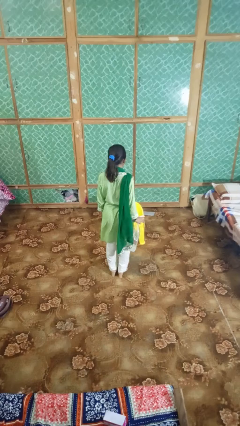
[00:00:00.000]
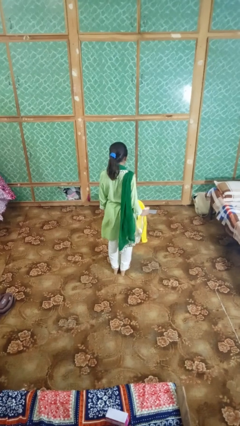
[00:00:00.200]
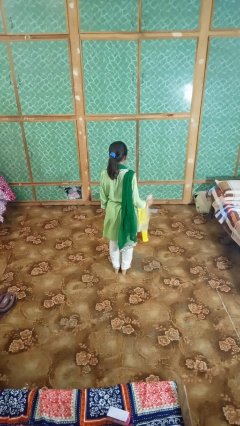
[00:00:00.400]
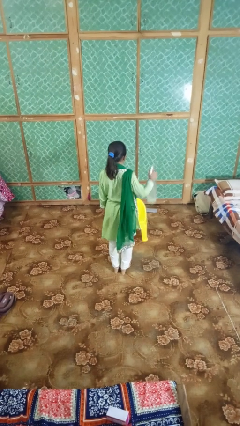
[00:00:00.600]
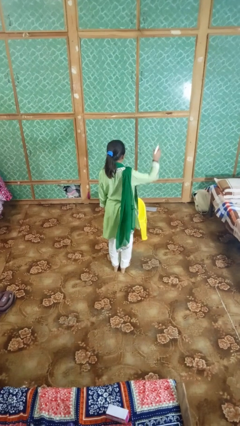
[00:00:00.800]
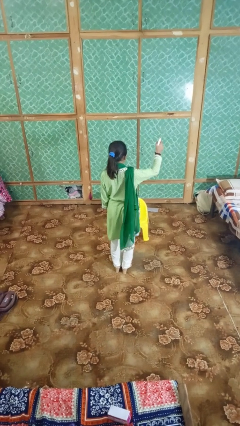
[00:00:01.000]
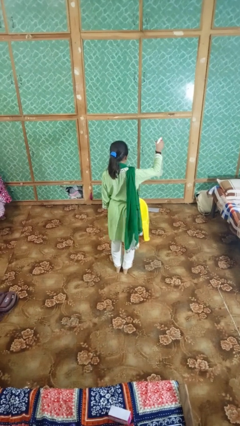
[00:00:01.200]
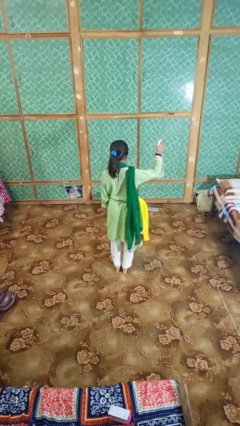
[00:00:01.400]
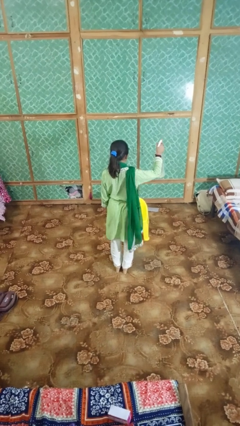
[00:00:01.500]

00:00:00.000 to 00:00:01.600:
person sprays from bottle

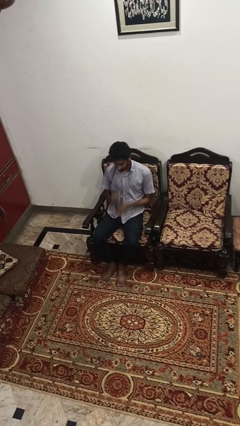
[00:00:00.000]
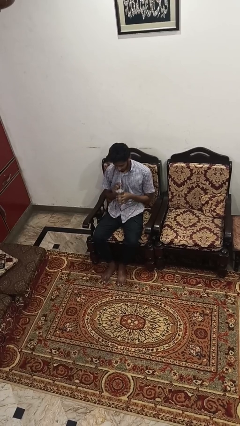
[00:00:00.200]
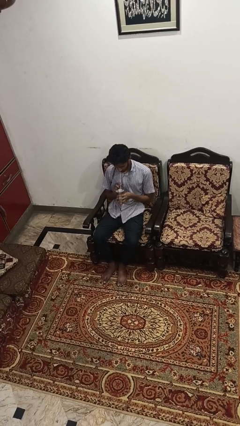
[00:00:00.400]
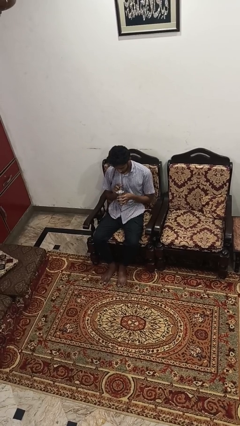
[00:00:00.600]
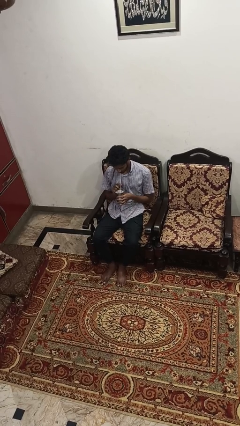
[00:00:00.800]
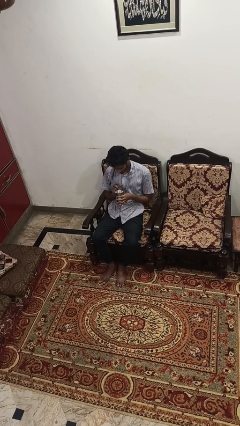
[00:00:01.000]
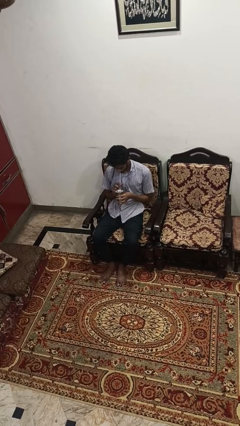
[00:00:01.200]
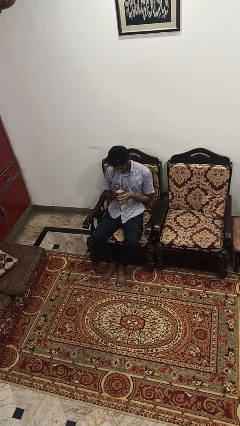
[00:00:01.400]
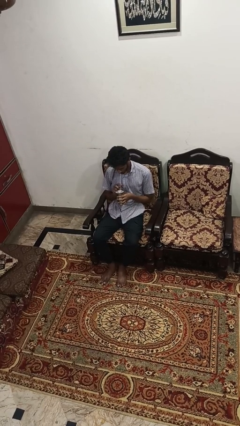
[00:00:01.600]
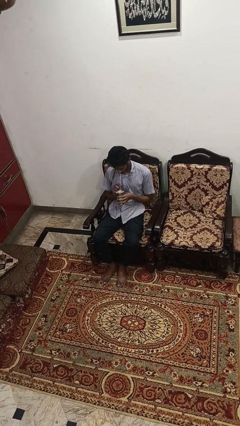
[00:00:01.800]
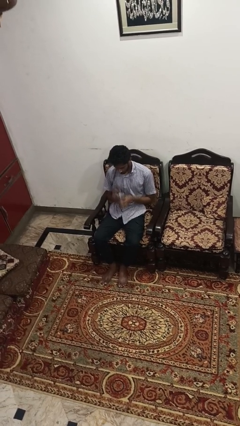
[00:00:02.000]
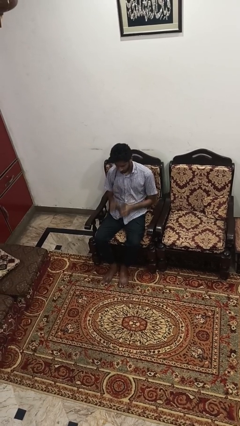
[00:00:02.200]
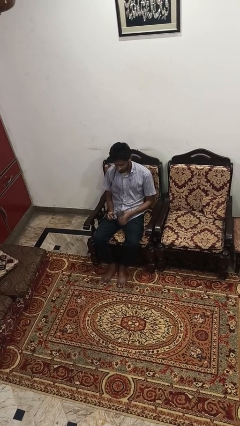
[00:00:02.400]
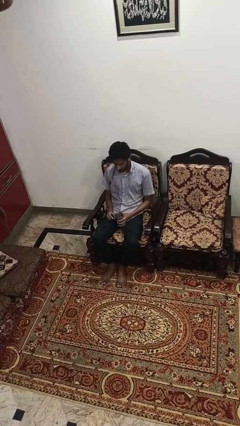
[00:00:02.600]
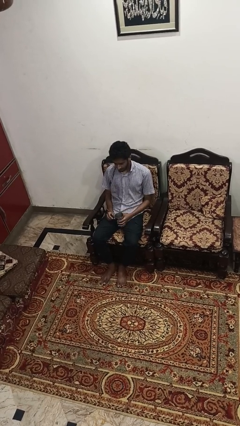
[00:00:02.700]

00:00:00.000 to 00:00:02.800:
person drinks from straw

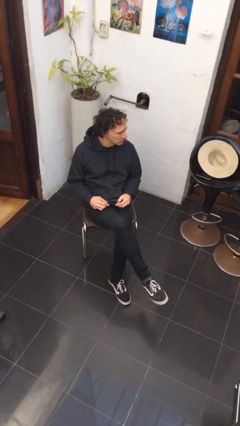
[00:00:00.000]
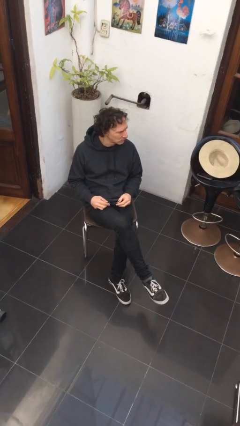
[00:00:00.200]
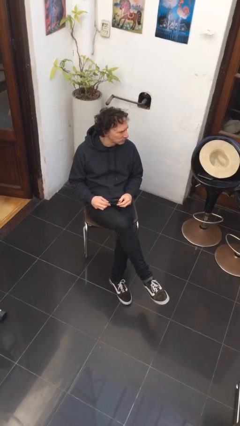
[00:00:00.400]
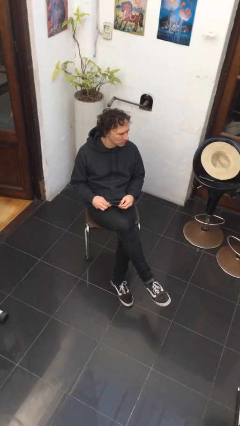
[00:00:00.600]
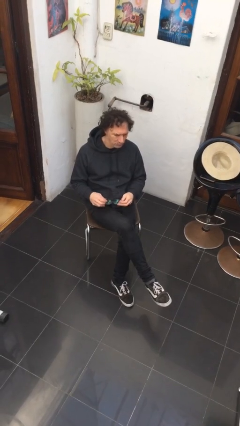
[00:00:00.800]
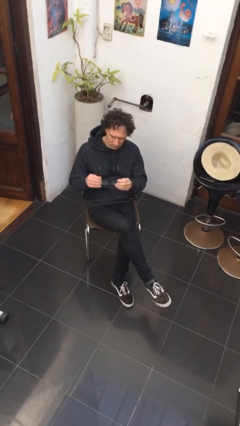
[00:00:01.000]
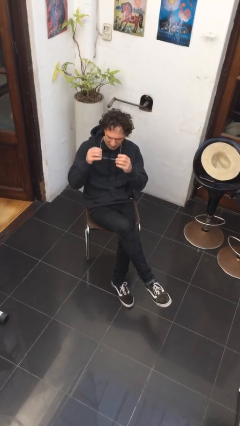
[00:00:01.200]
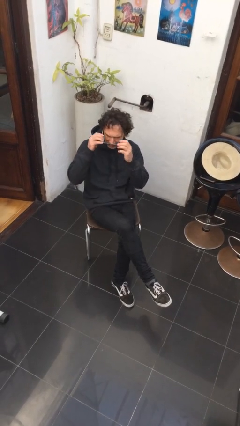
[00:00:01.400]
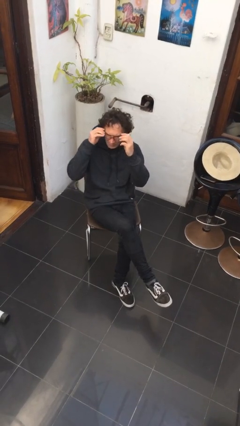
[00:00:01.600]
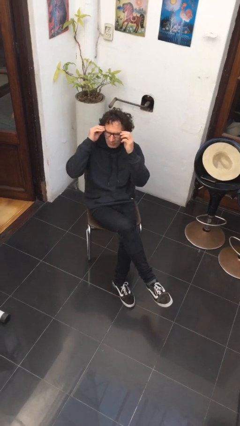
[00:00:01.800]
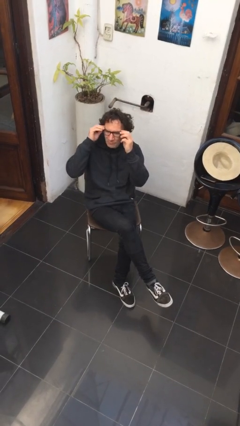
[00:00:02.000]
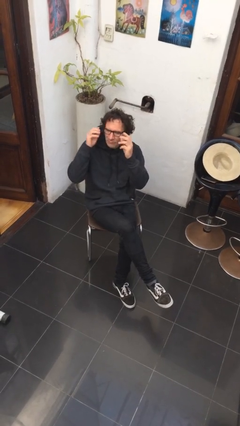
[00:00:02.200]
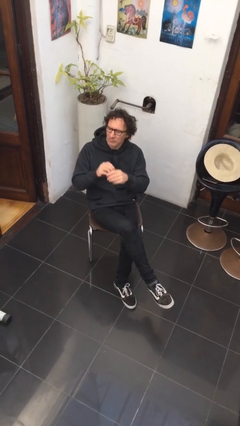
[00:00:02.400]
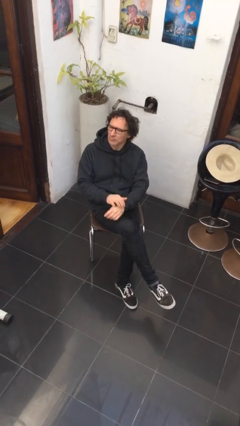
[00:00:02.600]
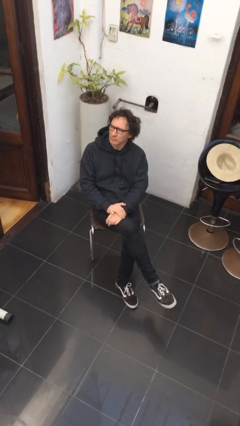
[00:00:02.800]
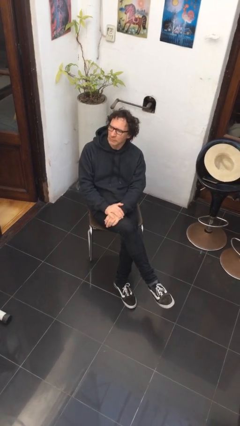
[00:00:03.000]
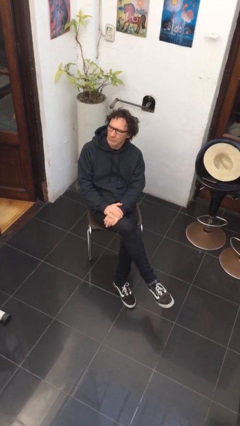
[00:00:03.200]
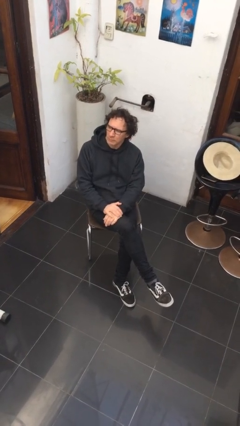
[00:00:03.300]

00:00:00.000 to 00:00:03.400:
person puts on glasses

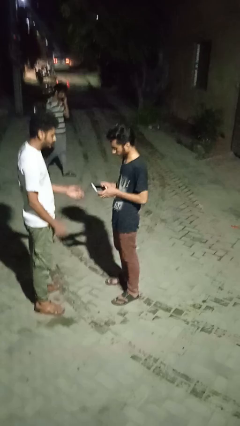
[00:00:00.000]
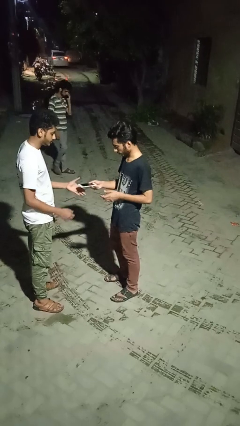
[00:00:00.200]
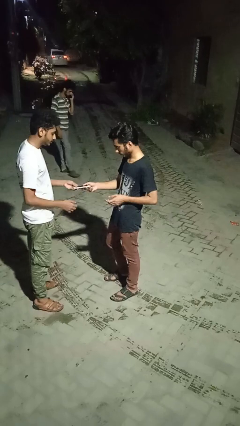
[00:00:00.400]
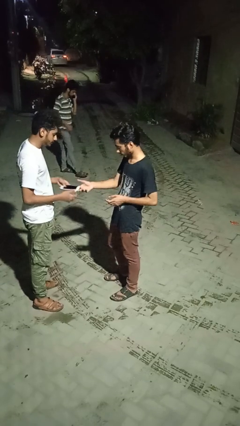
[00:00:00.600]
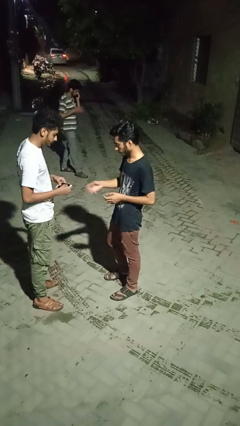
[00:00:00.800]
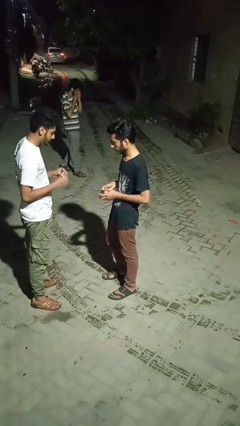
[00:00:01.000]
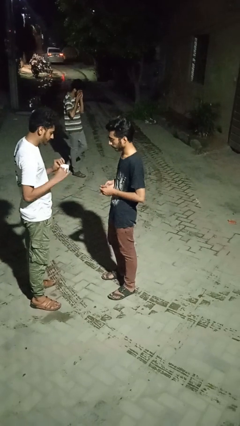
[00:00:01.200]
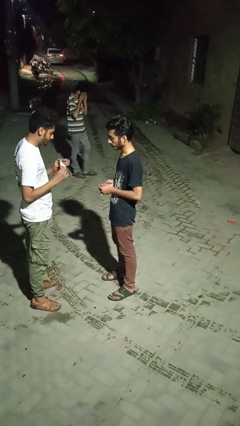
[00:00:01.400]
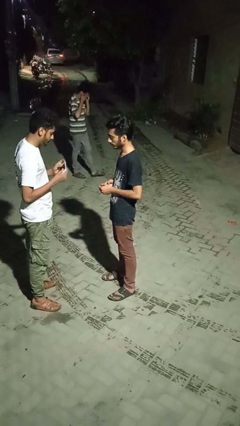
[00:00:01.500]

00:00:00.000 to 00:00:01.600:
person transfers object to person

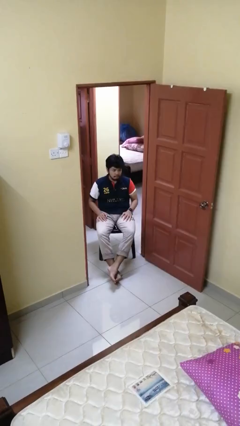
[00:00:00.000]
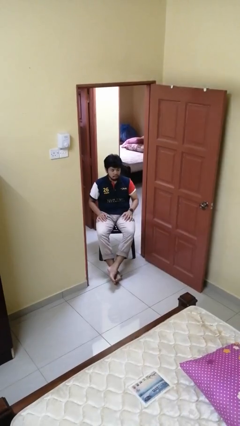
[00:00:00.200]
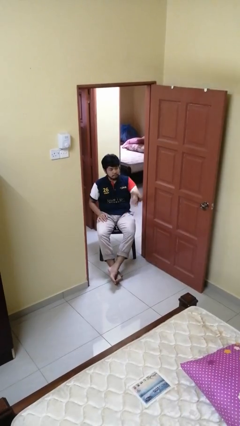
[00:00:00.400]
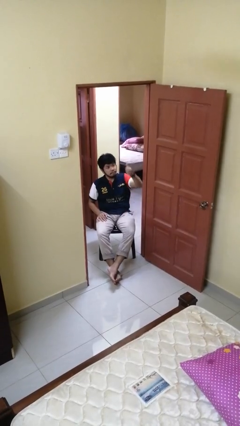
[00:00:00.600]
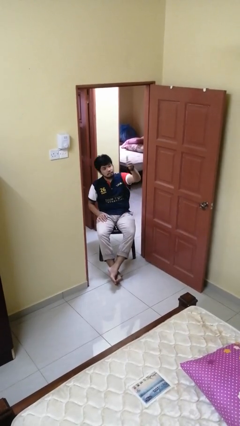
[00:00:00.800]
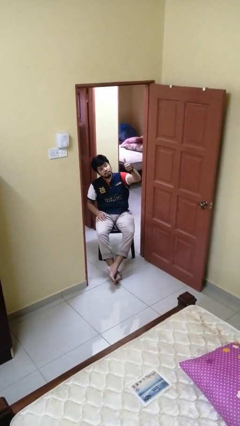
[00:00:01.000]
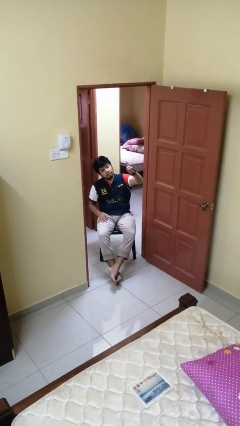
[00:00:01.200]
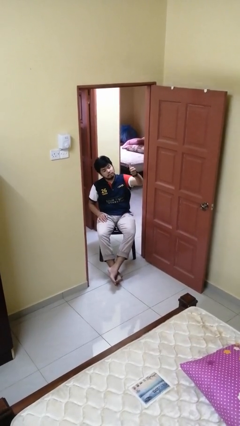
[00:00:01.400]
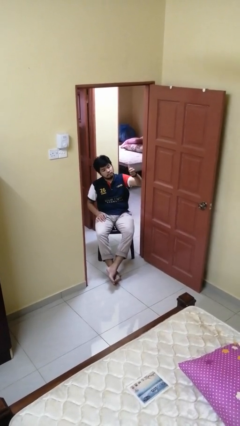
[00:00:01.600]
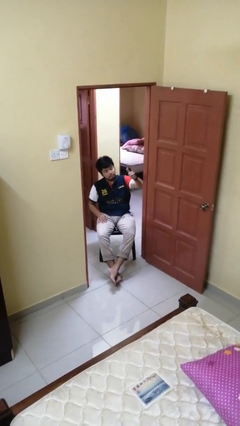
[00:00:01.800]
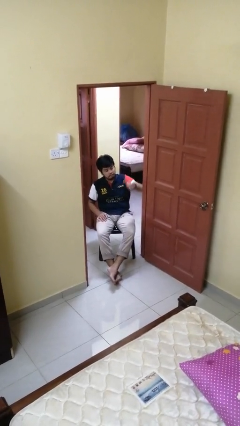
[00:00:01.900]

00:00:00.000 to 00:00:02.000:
person gestures thumbs up

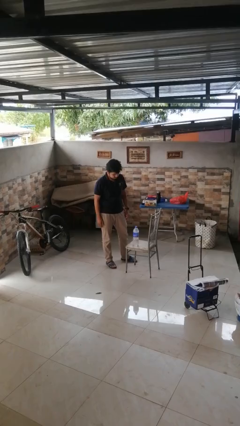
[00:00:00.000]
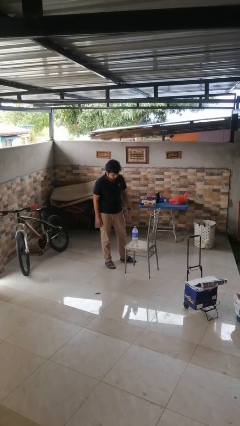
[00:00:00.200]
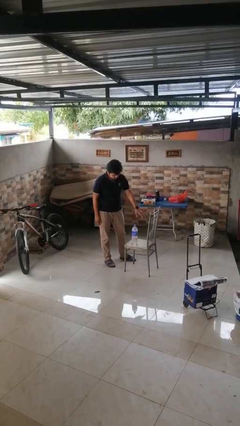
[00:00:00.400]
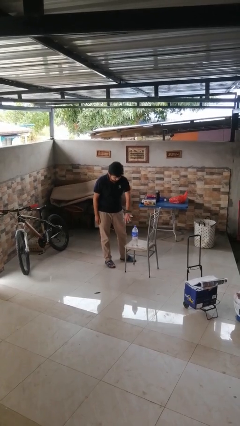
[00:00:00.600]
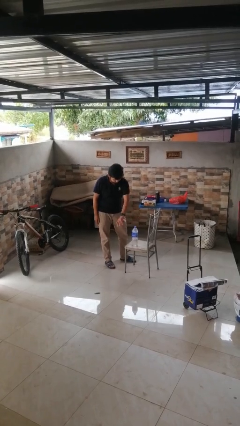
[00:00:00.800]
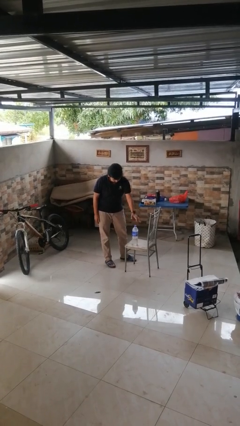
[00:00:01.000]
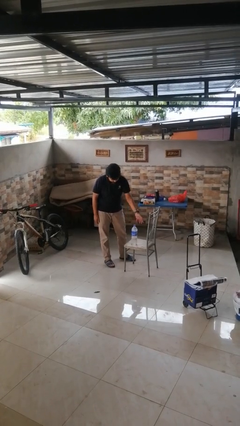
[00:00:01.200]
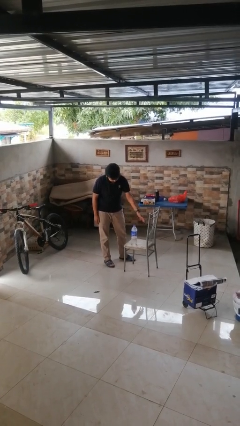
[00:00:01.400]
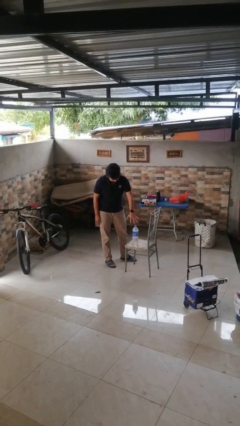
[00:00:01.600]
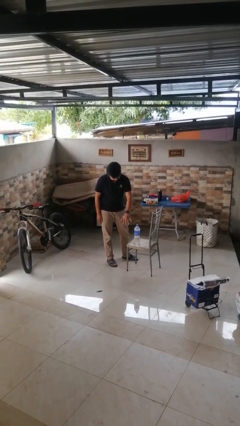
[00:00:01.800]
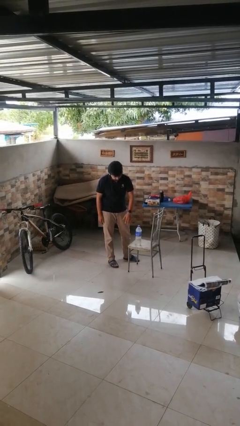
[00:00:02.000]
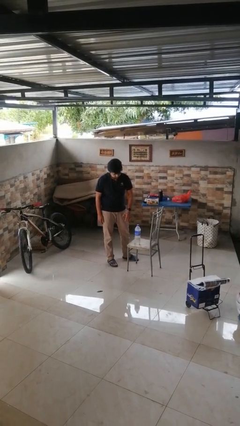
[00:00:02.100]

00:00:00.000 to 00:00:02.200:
person waves hand over object

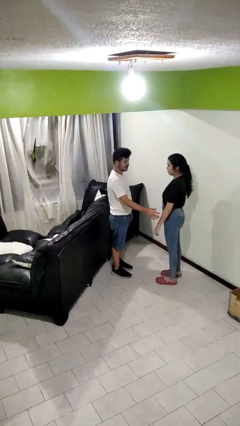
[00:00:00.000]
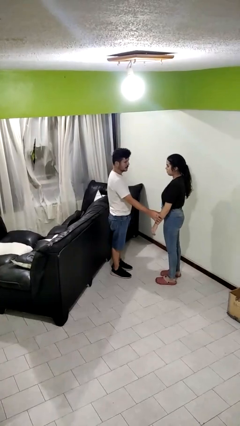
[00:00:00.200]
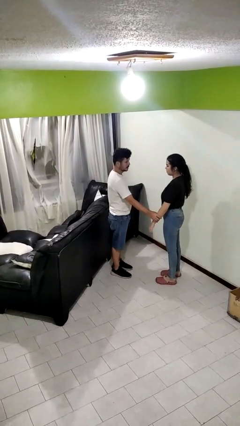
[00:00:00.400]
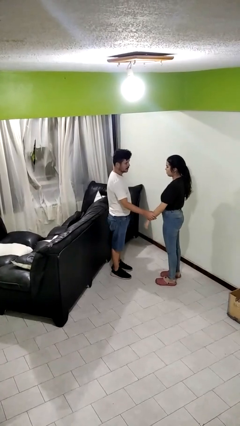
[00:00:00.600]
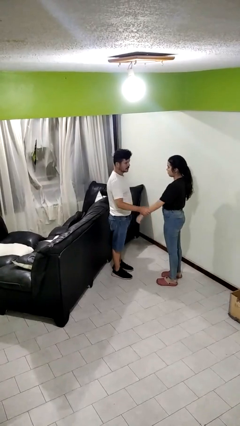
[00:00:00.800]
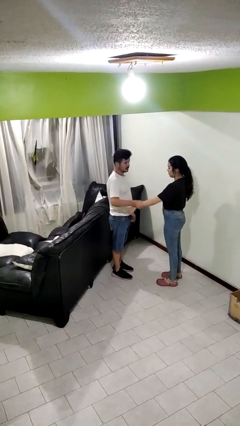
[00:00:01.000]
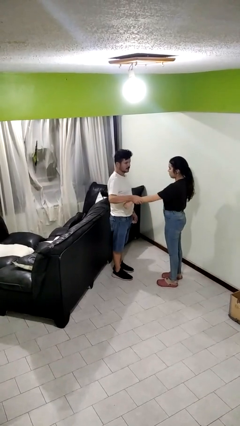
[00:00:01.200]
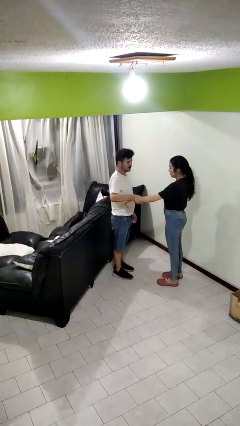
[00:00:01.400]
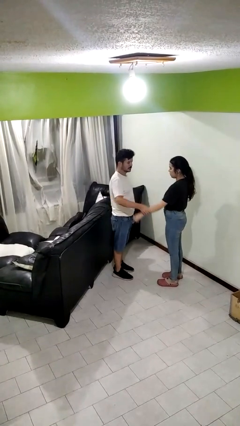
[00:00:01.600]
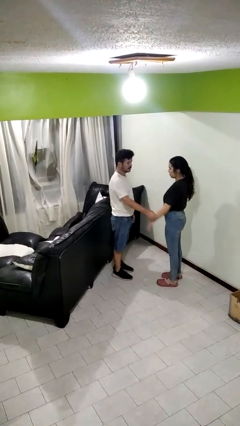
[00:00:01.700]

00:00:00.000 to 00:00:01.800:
person grabs person by forearm

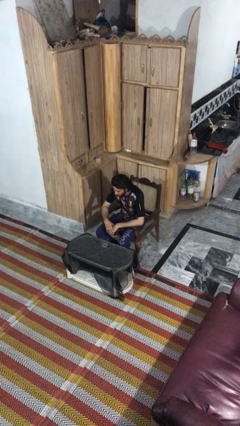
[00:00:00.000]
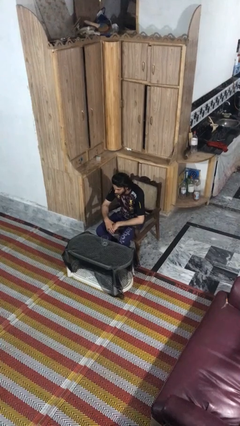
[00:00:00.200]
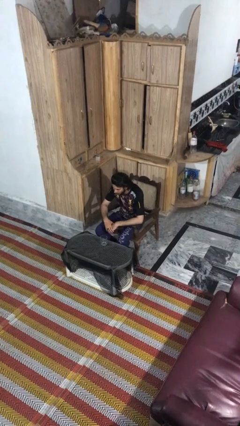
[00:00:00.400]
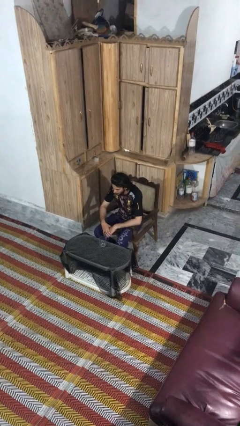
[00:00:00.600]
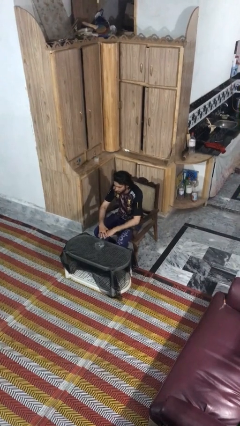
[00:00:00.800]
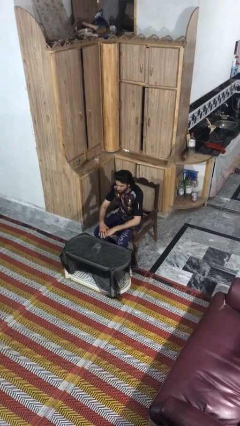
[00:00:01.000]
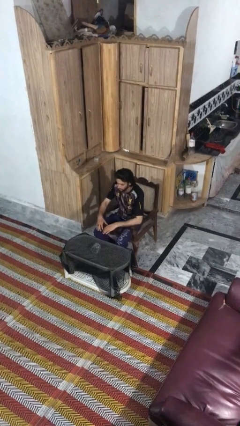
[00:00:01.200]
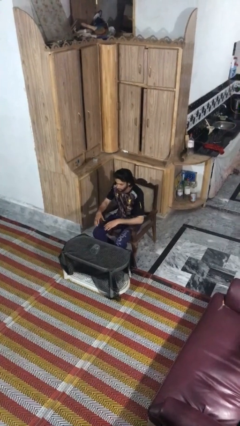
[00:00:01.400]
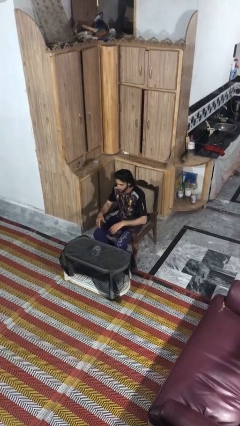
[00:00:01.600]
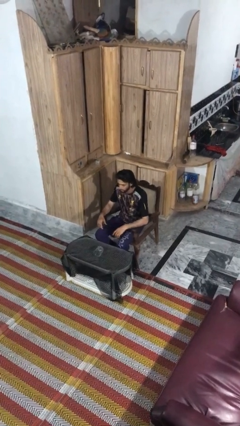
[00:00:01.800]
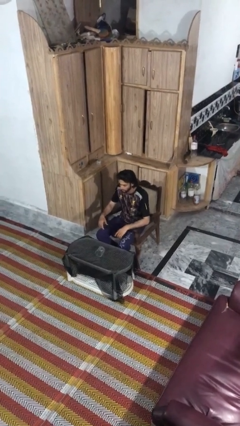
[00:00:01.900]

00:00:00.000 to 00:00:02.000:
person knocks over glass
